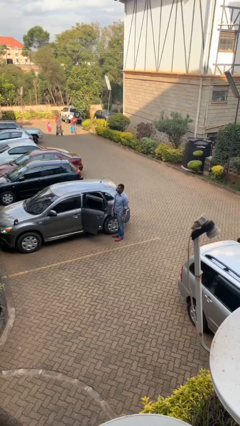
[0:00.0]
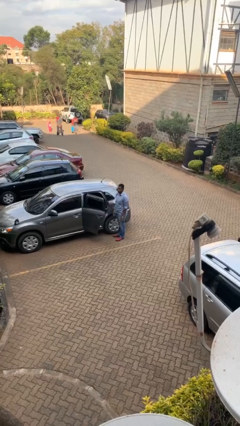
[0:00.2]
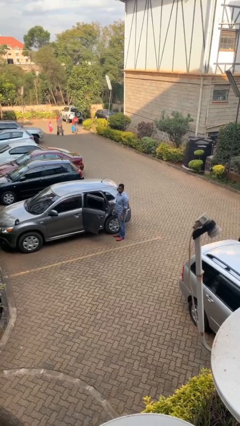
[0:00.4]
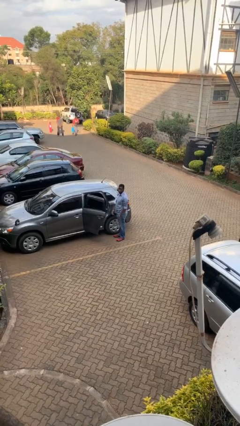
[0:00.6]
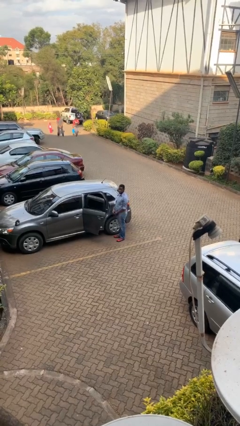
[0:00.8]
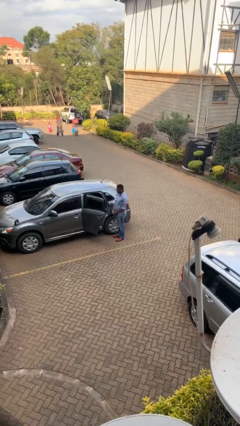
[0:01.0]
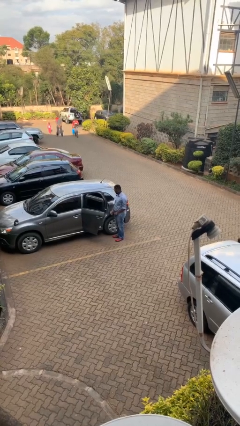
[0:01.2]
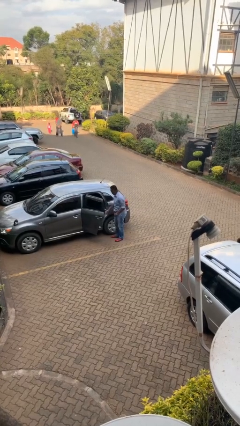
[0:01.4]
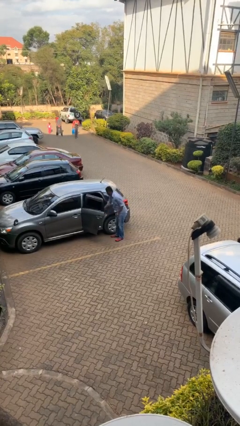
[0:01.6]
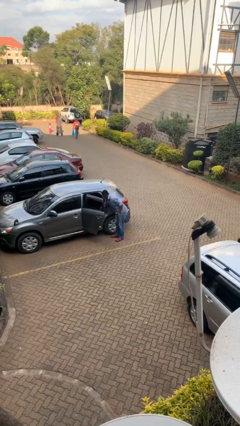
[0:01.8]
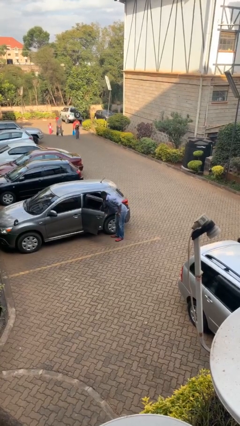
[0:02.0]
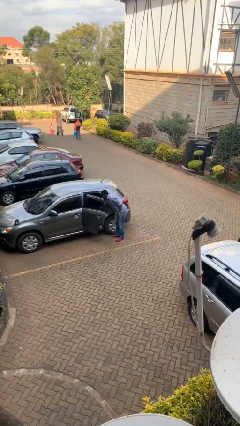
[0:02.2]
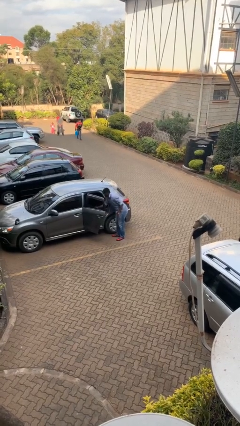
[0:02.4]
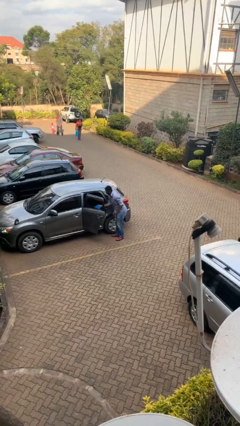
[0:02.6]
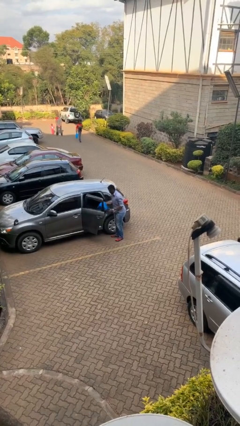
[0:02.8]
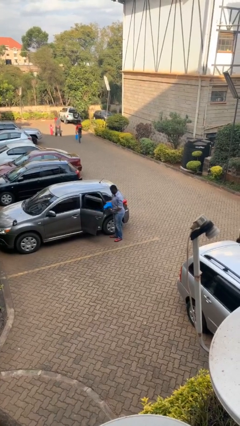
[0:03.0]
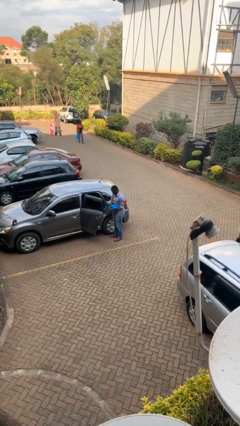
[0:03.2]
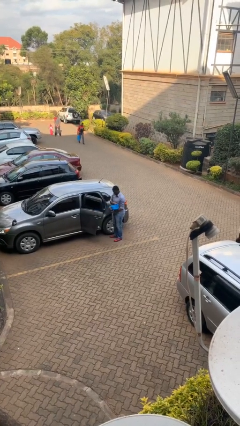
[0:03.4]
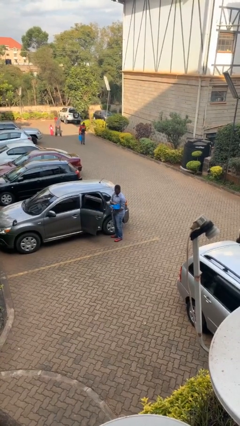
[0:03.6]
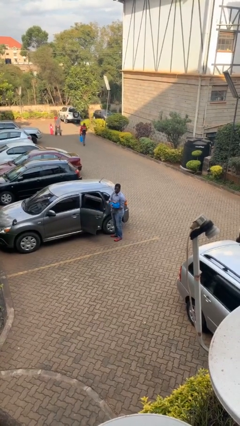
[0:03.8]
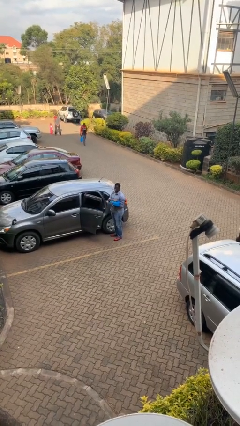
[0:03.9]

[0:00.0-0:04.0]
person unloads car

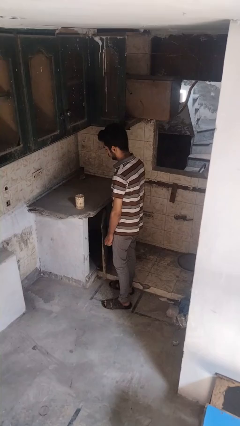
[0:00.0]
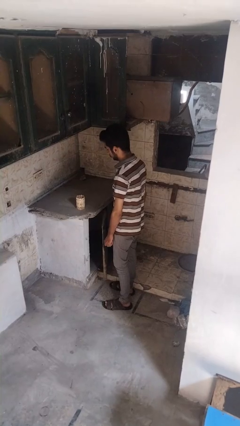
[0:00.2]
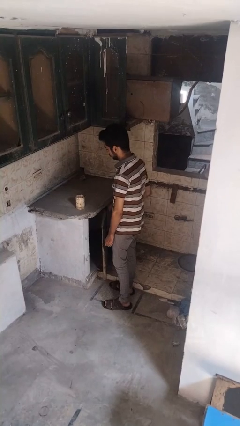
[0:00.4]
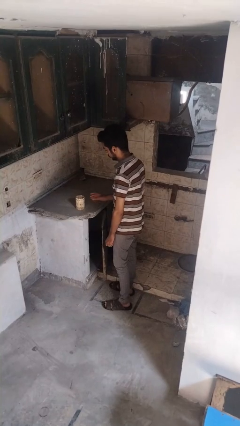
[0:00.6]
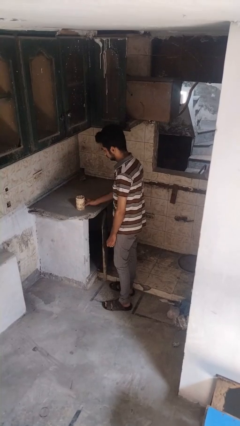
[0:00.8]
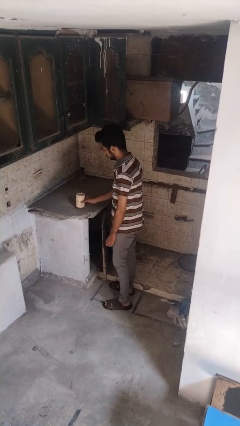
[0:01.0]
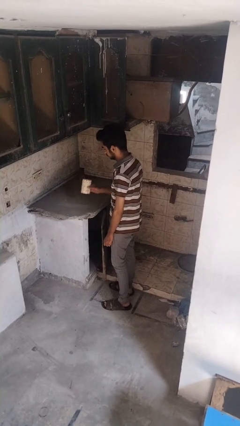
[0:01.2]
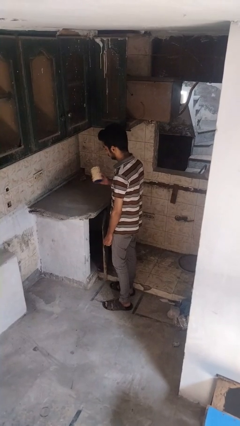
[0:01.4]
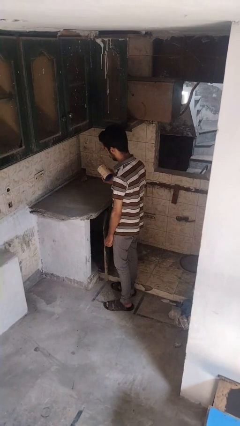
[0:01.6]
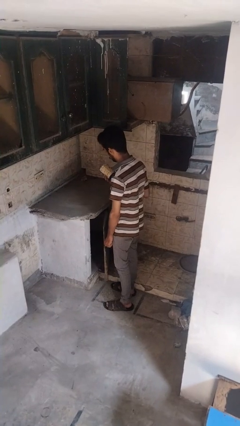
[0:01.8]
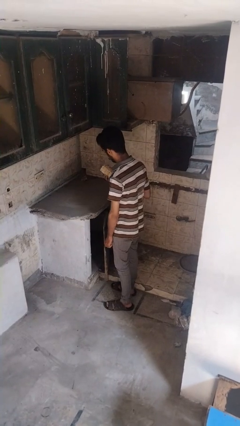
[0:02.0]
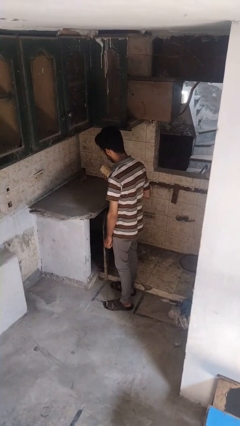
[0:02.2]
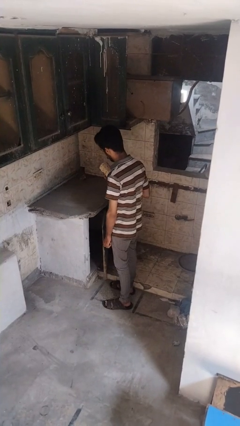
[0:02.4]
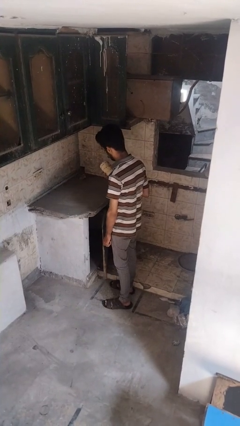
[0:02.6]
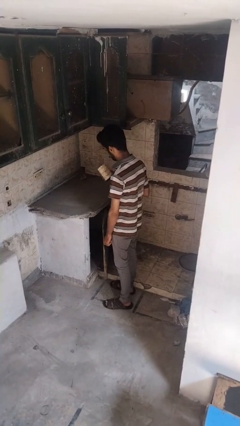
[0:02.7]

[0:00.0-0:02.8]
person picks up object from countertop

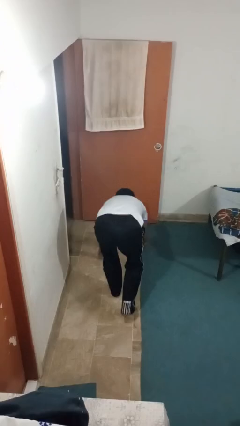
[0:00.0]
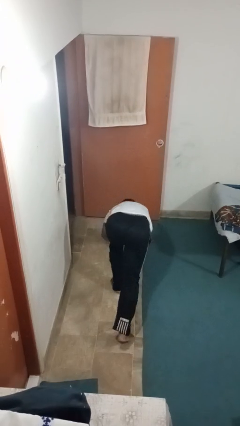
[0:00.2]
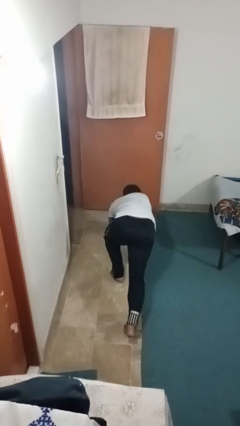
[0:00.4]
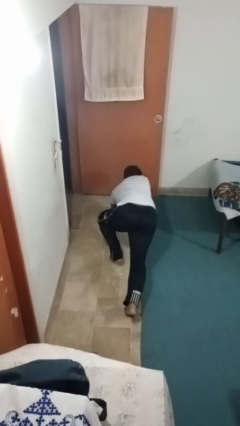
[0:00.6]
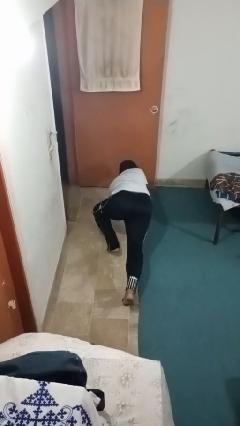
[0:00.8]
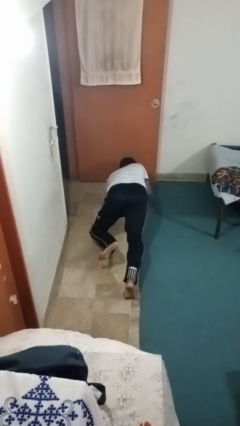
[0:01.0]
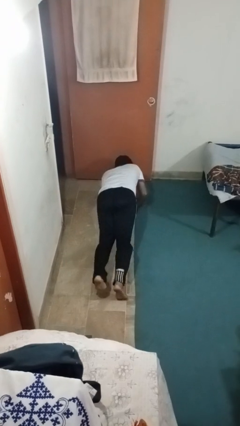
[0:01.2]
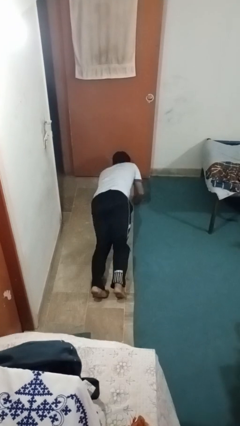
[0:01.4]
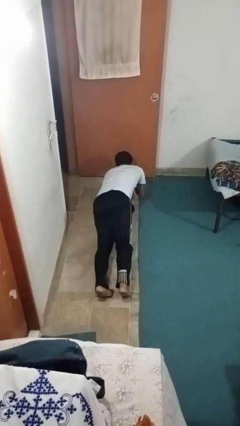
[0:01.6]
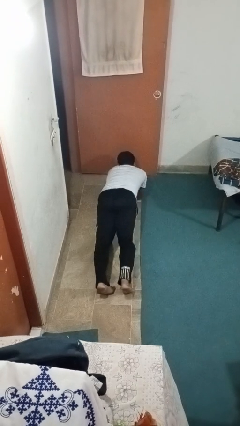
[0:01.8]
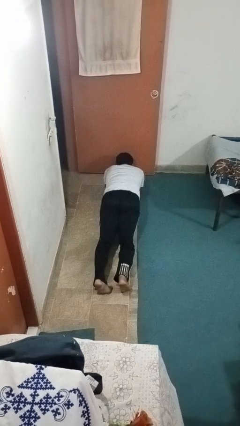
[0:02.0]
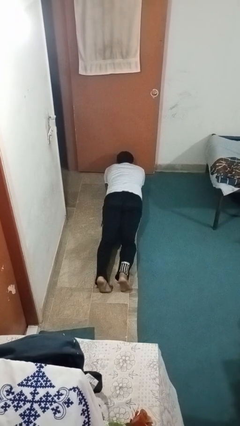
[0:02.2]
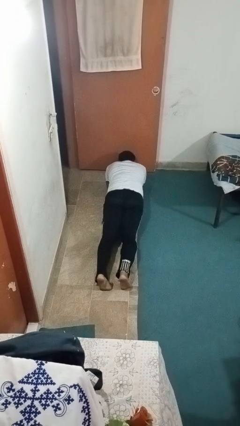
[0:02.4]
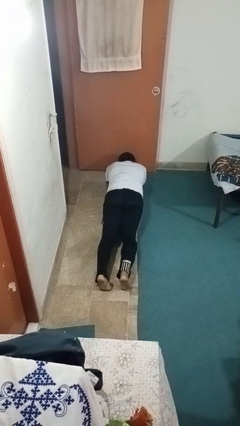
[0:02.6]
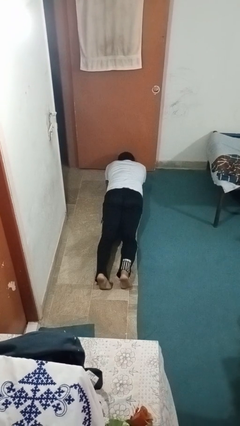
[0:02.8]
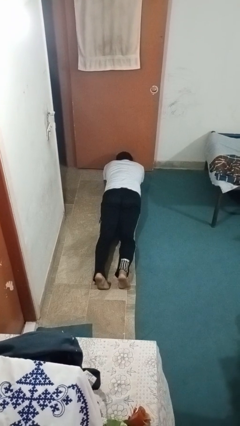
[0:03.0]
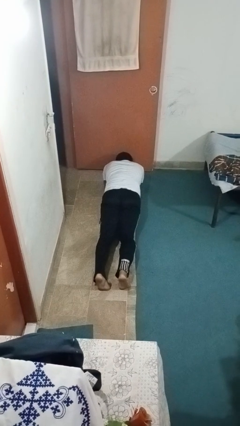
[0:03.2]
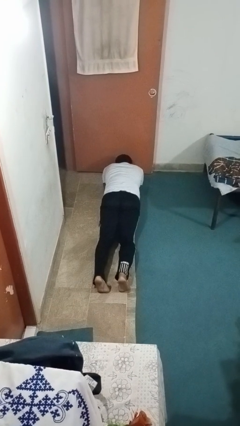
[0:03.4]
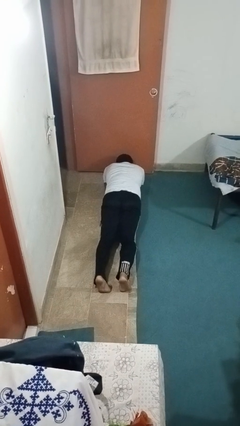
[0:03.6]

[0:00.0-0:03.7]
person exercises with plank

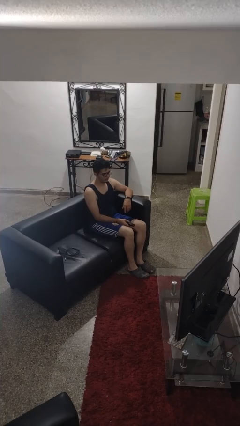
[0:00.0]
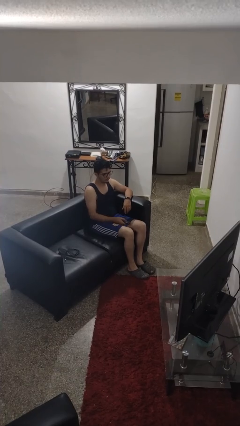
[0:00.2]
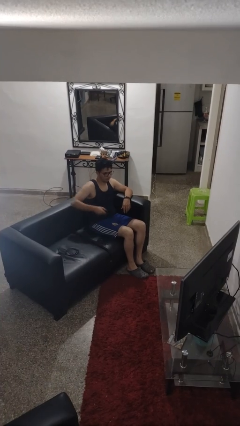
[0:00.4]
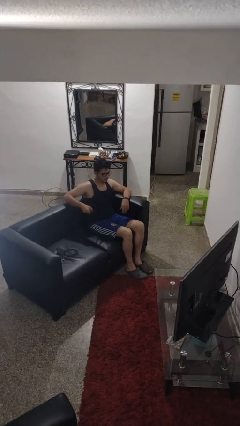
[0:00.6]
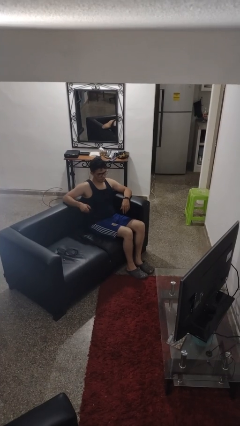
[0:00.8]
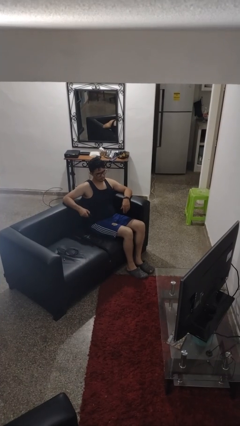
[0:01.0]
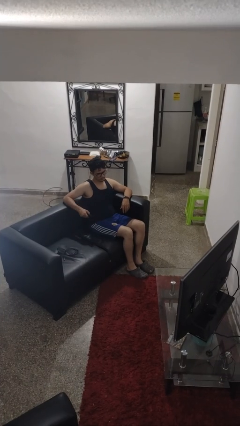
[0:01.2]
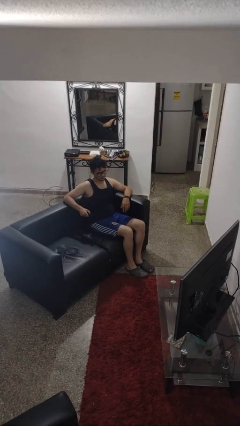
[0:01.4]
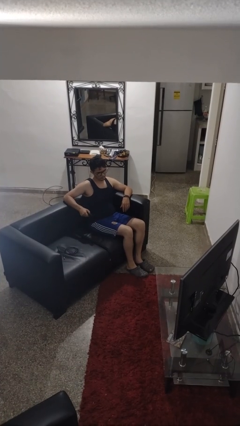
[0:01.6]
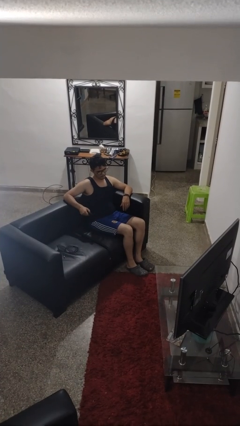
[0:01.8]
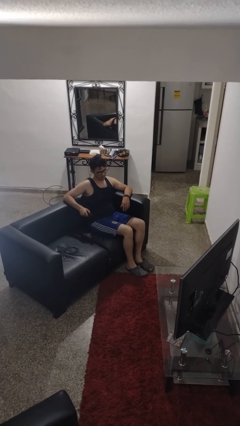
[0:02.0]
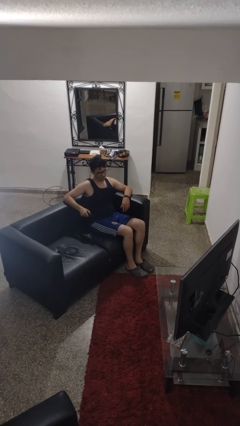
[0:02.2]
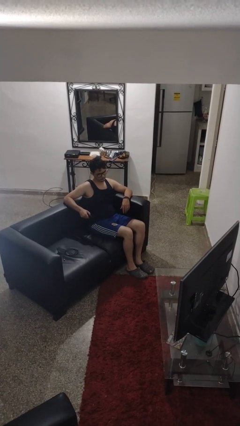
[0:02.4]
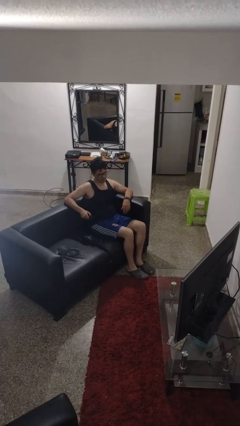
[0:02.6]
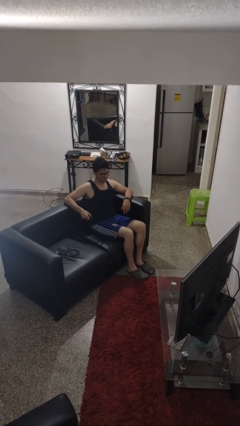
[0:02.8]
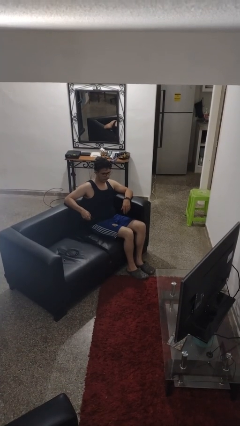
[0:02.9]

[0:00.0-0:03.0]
person uses television remote

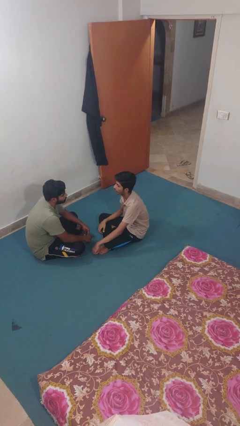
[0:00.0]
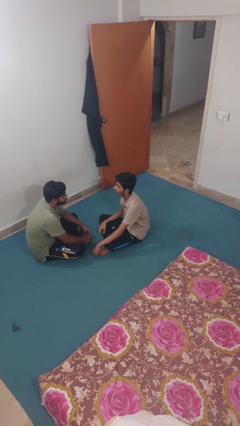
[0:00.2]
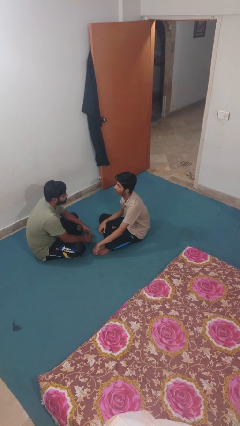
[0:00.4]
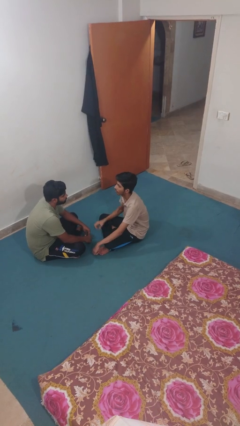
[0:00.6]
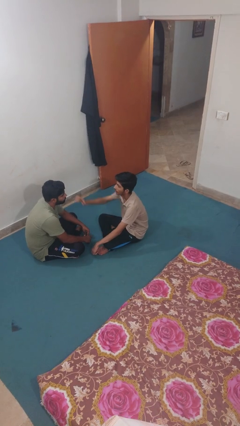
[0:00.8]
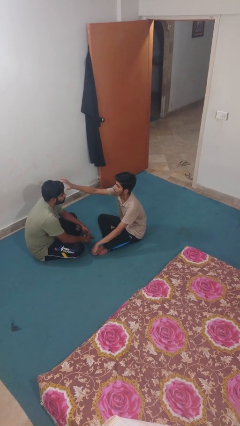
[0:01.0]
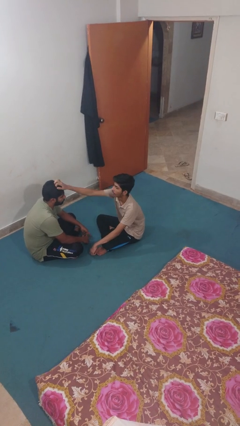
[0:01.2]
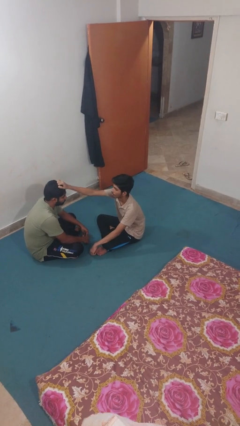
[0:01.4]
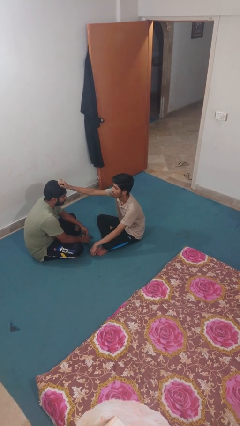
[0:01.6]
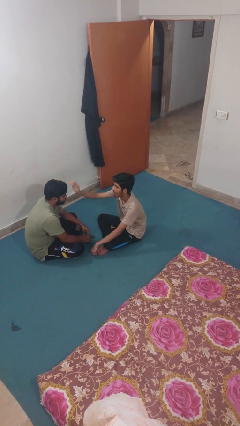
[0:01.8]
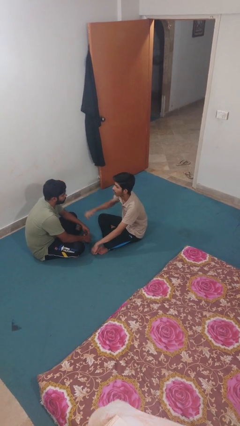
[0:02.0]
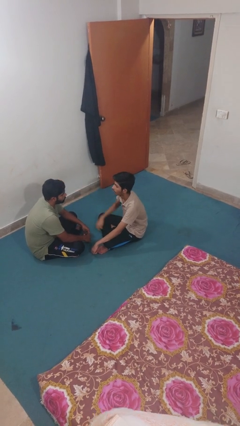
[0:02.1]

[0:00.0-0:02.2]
person grabs person by hair

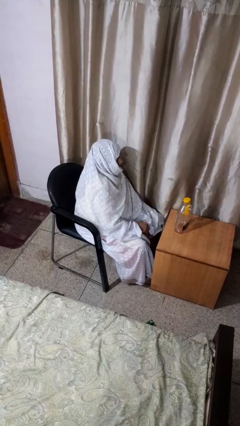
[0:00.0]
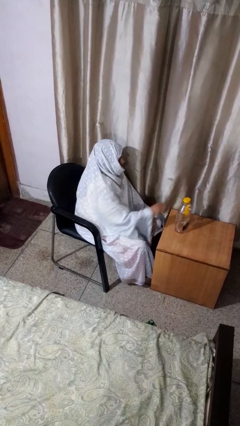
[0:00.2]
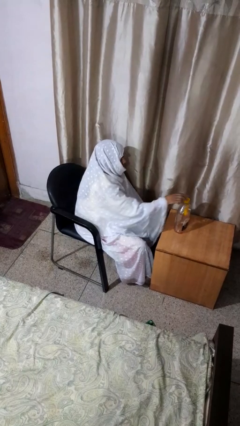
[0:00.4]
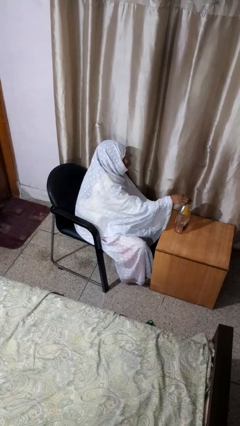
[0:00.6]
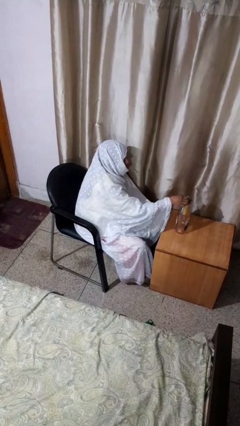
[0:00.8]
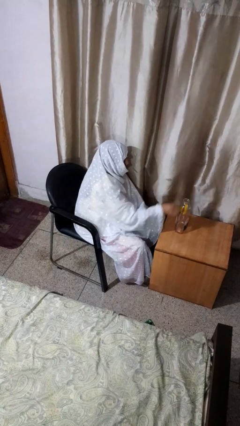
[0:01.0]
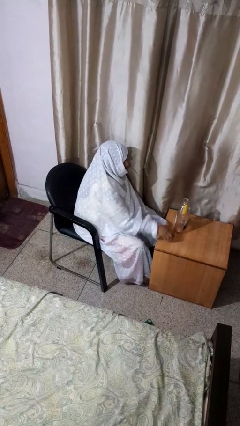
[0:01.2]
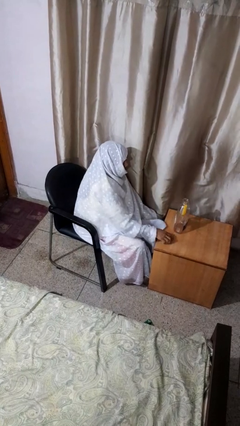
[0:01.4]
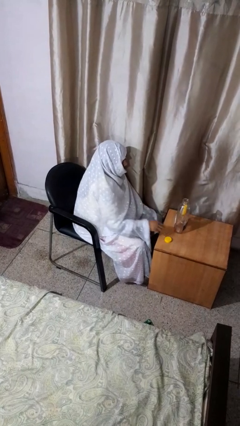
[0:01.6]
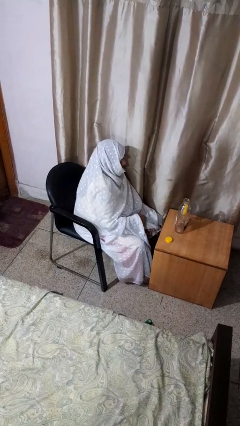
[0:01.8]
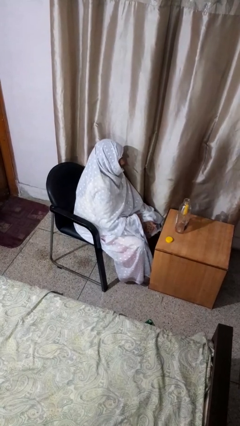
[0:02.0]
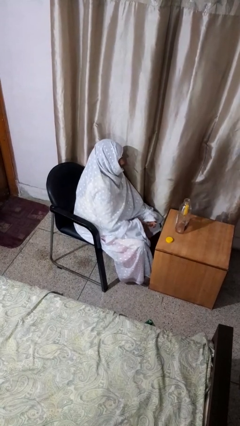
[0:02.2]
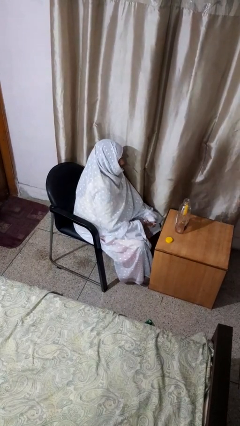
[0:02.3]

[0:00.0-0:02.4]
person unscrews lid from bottle
